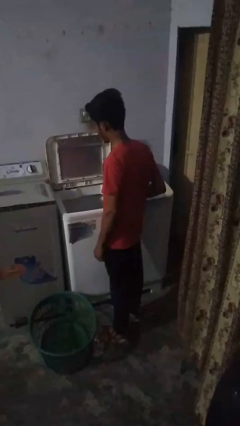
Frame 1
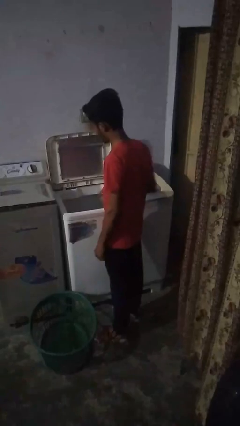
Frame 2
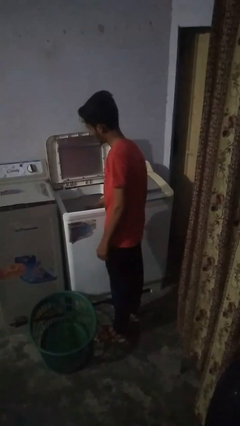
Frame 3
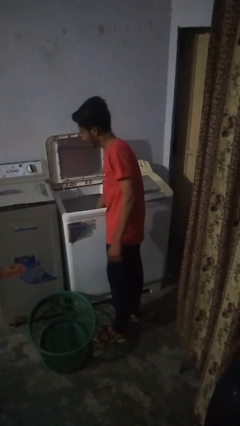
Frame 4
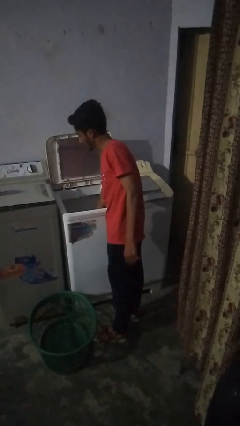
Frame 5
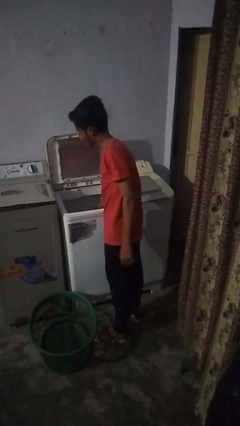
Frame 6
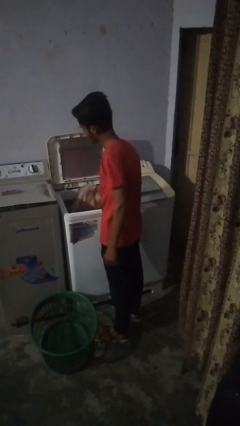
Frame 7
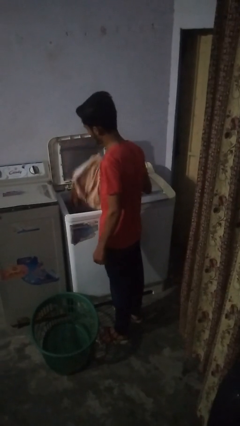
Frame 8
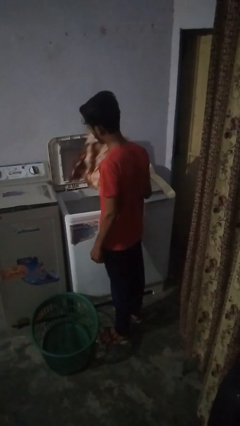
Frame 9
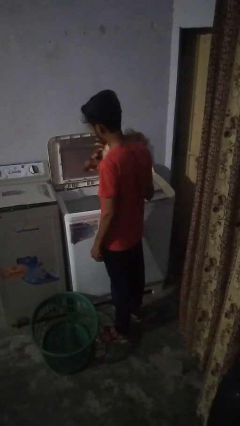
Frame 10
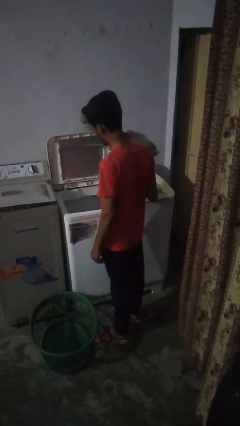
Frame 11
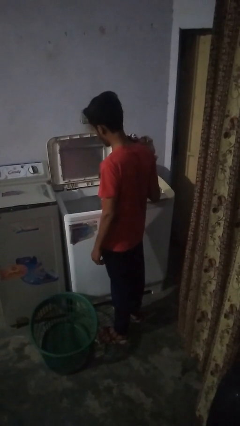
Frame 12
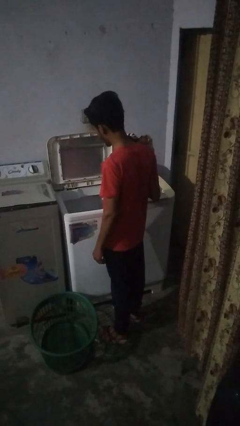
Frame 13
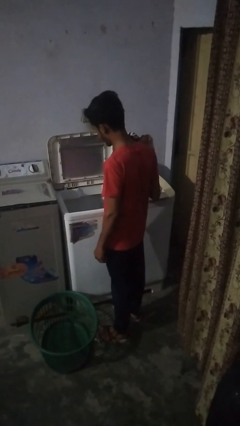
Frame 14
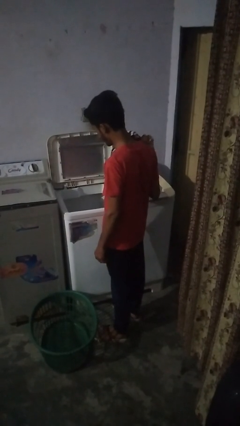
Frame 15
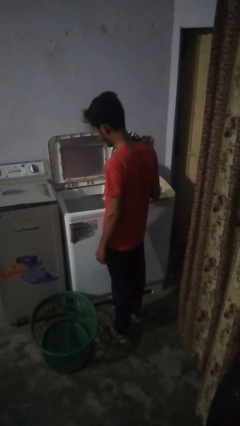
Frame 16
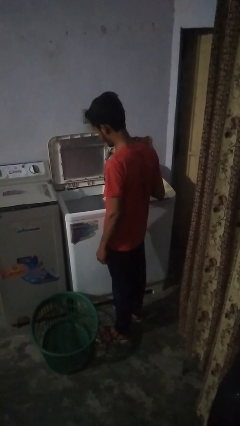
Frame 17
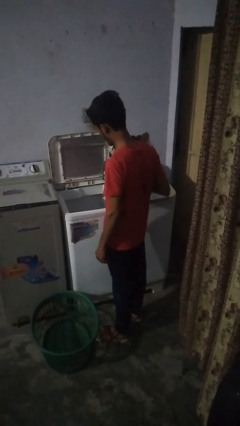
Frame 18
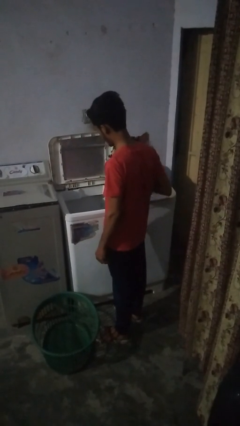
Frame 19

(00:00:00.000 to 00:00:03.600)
person unloads clotheswasher

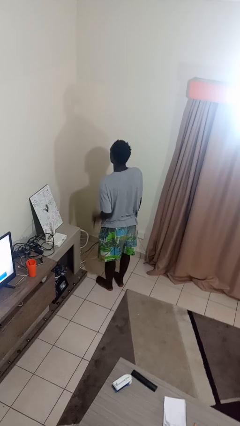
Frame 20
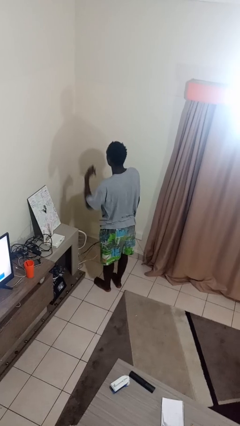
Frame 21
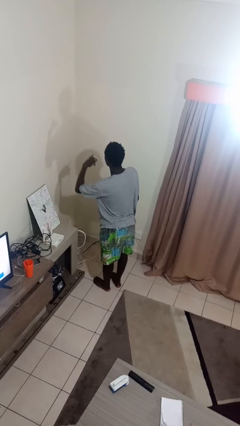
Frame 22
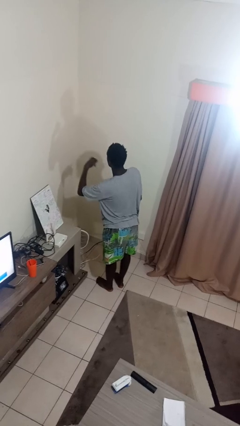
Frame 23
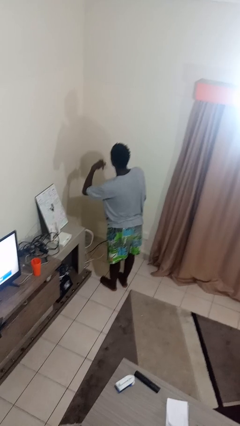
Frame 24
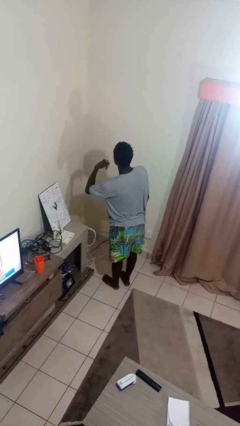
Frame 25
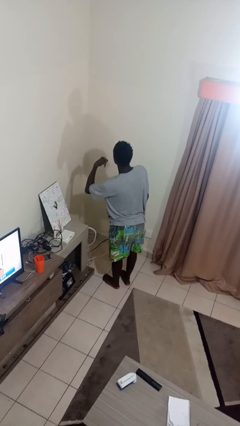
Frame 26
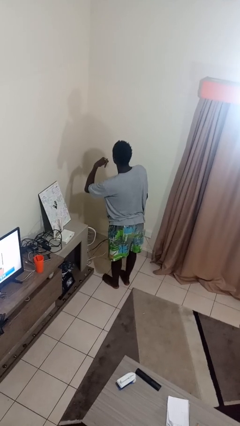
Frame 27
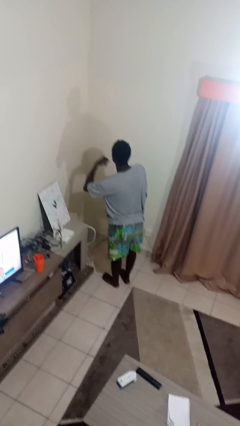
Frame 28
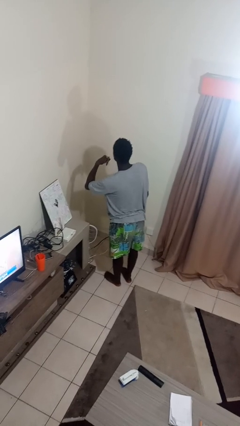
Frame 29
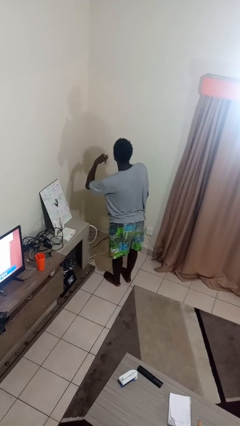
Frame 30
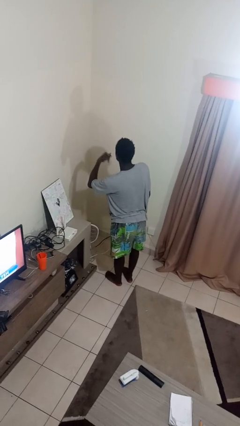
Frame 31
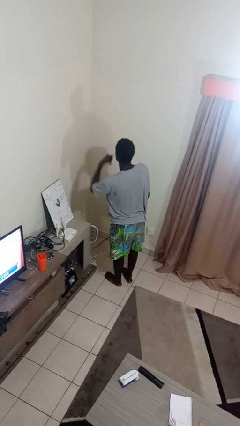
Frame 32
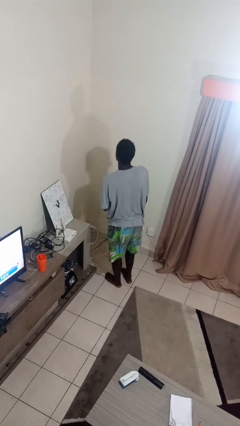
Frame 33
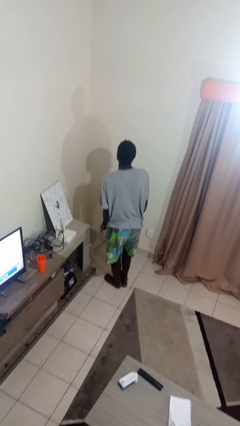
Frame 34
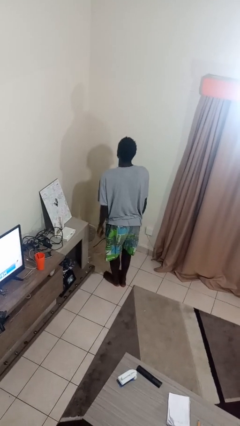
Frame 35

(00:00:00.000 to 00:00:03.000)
person gestures call me

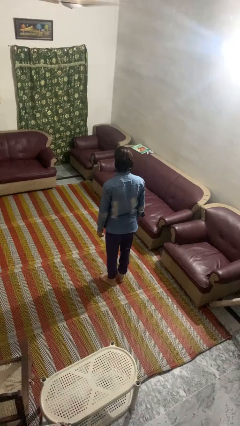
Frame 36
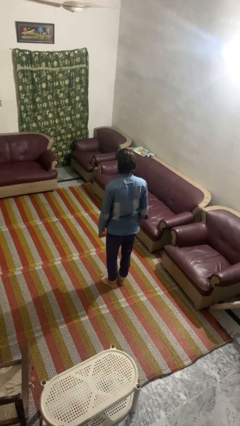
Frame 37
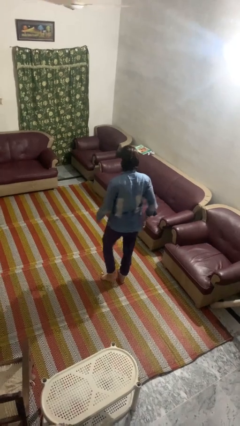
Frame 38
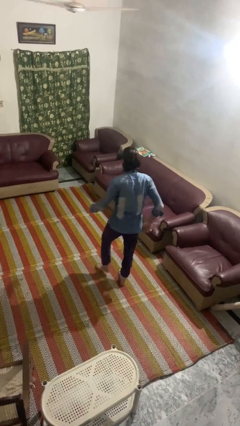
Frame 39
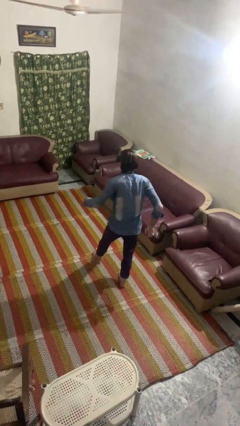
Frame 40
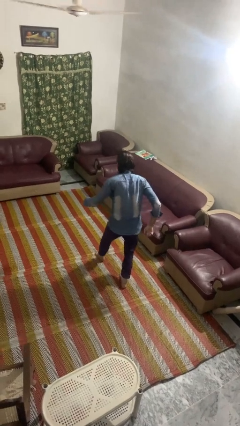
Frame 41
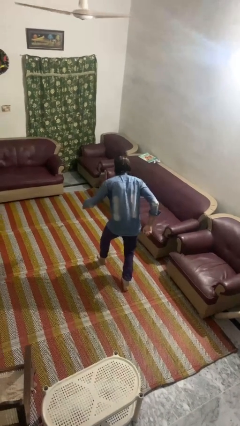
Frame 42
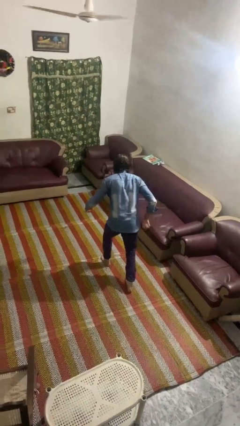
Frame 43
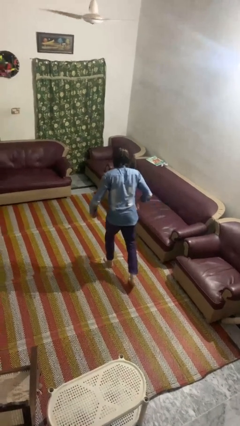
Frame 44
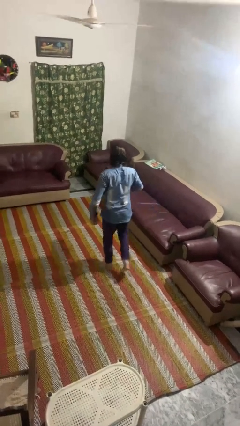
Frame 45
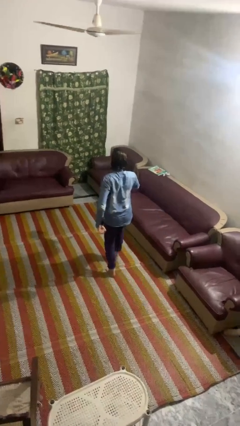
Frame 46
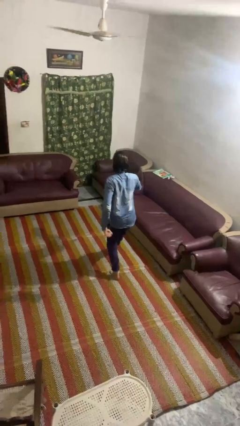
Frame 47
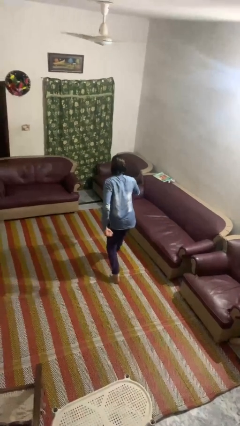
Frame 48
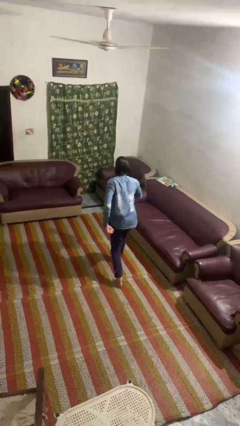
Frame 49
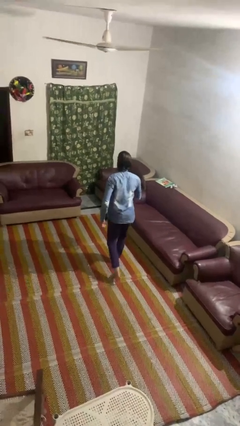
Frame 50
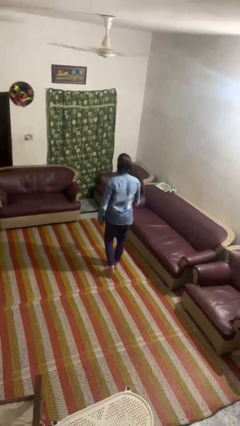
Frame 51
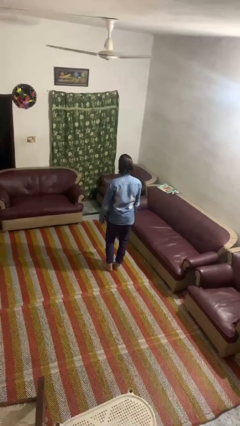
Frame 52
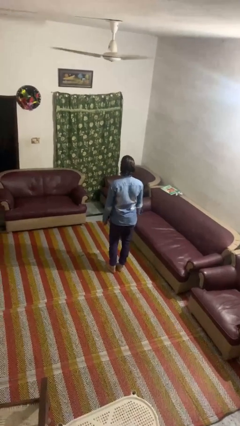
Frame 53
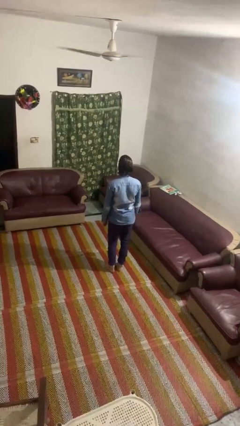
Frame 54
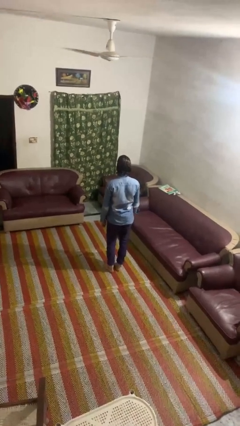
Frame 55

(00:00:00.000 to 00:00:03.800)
person walks tiptoe

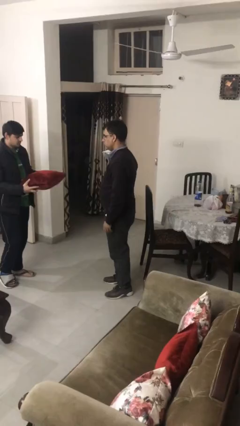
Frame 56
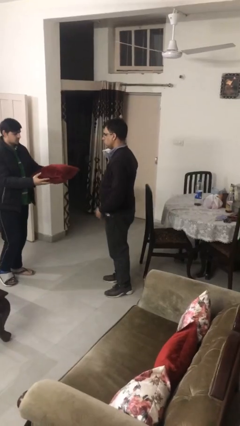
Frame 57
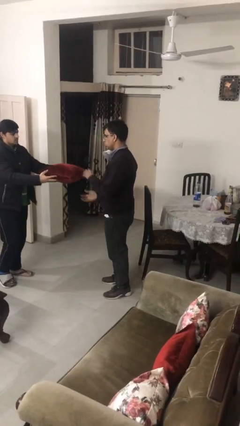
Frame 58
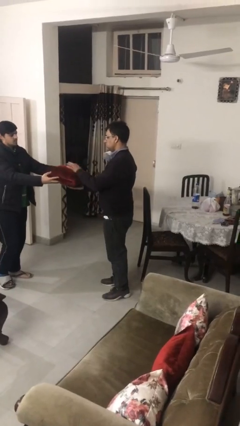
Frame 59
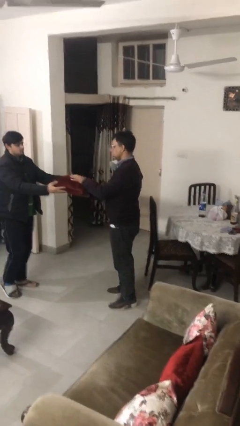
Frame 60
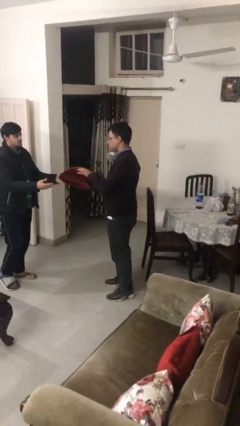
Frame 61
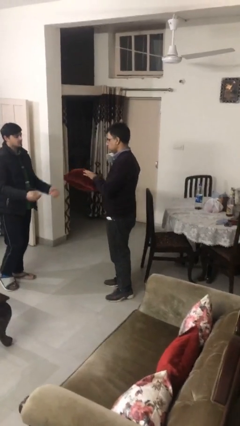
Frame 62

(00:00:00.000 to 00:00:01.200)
person transfers object to person

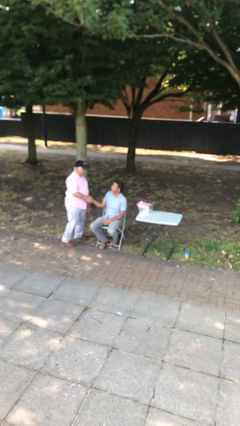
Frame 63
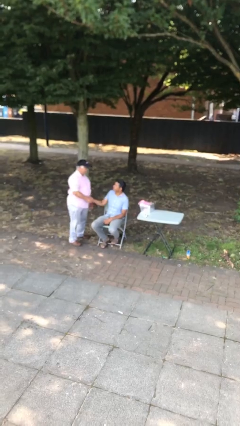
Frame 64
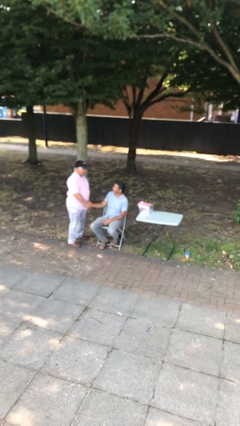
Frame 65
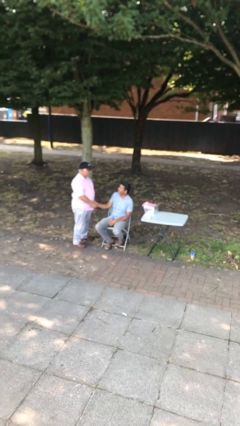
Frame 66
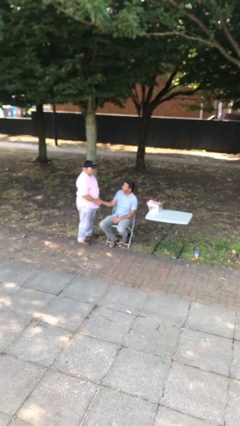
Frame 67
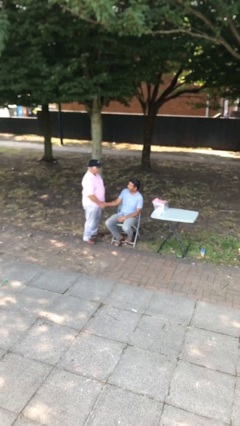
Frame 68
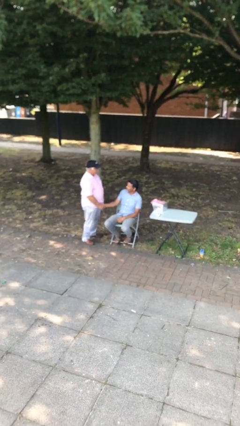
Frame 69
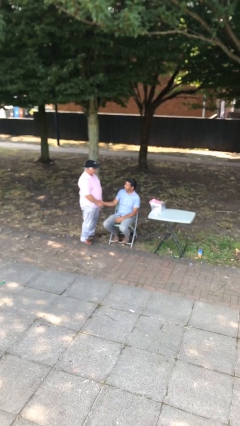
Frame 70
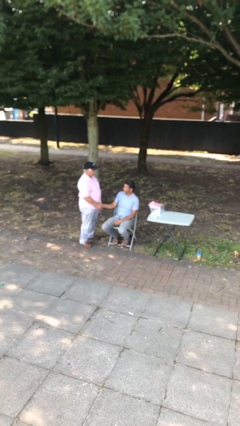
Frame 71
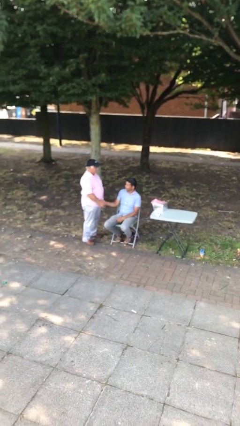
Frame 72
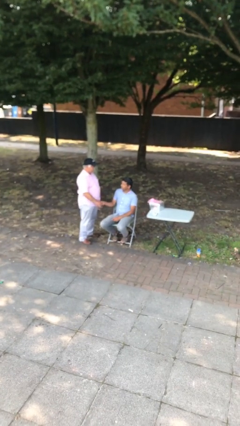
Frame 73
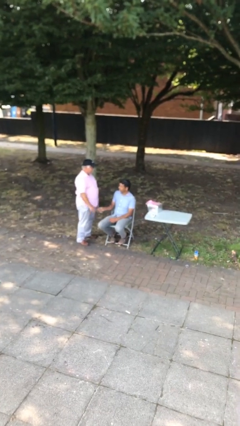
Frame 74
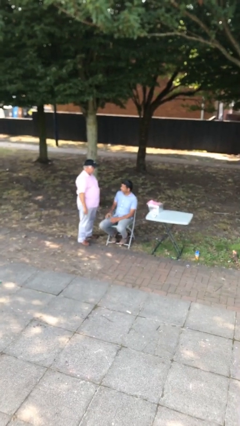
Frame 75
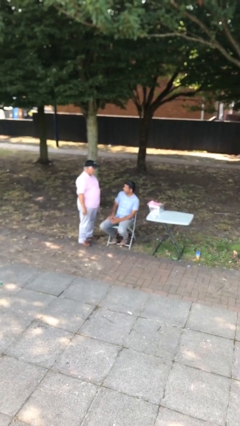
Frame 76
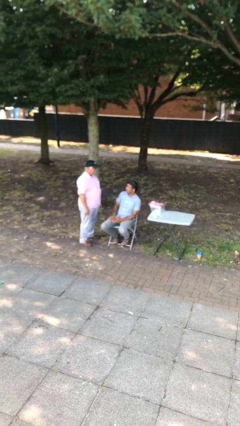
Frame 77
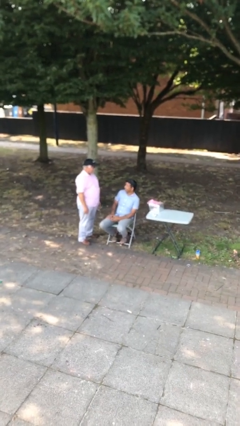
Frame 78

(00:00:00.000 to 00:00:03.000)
person shakes hand

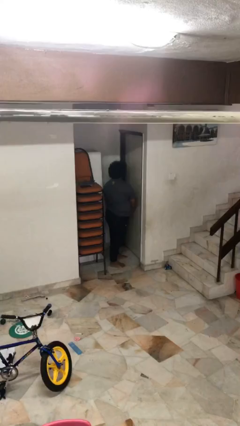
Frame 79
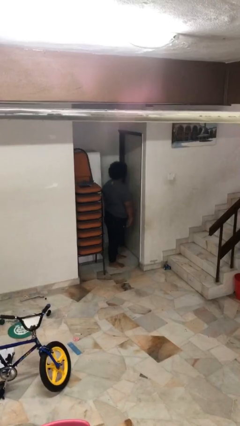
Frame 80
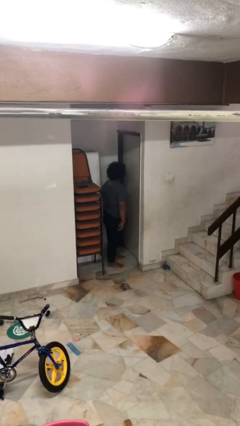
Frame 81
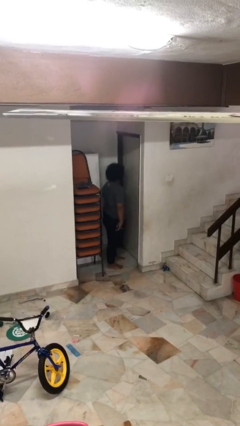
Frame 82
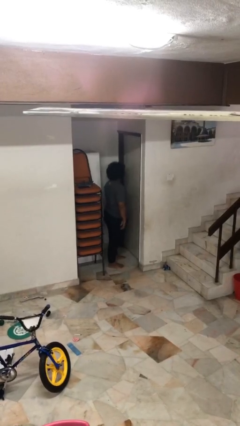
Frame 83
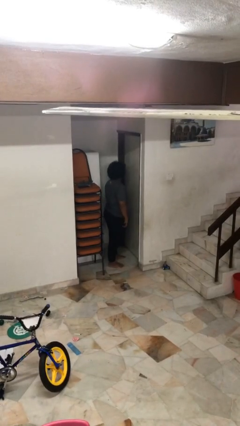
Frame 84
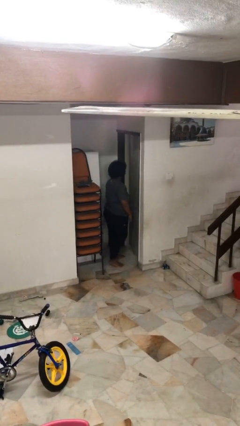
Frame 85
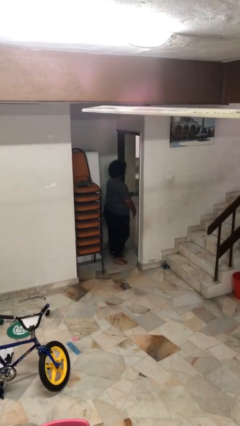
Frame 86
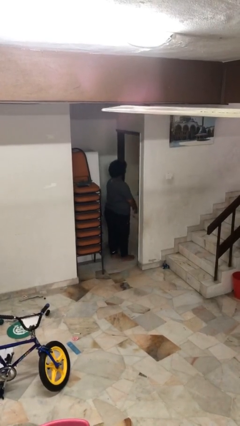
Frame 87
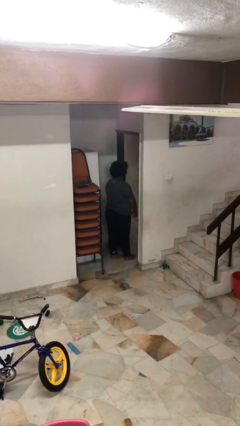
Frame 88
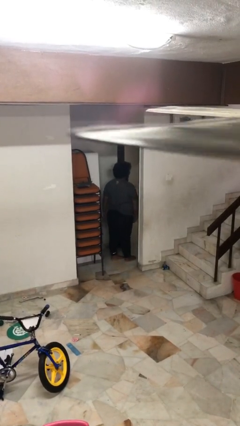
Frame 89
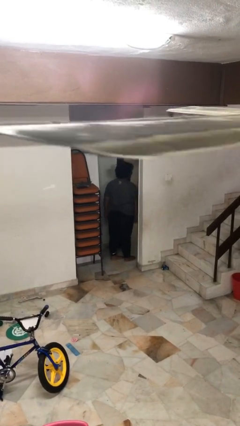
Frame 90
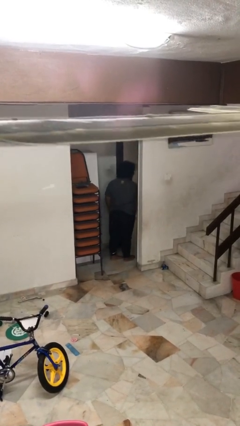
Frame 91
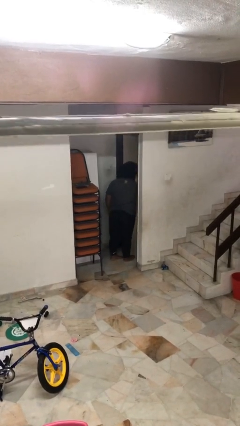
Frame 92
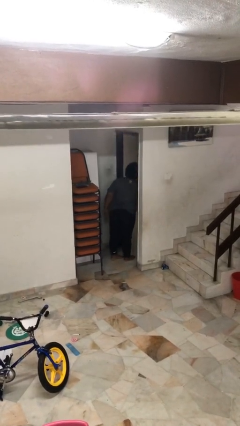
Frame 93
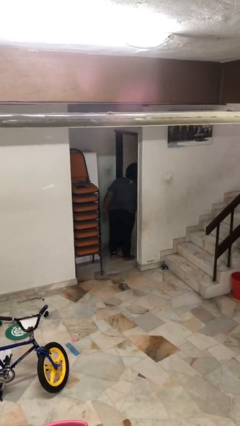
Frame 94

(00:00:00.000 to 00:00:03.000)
person opens facility door
